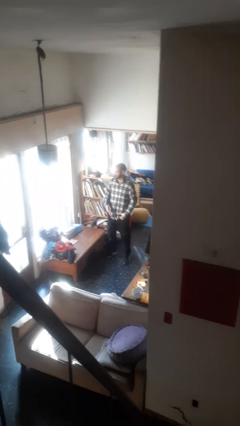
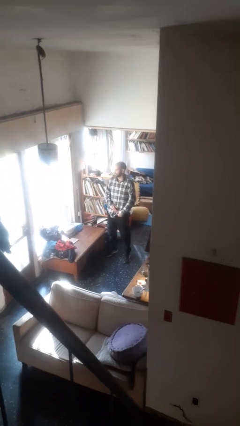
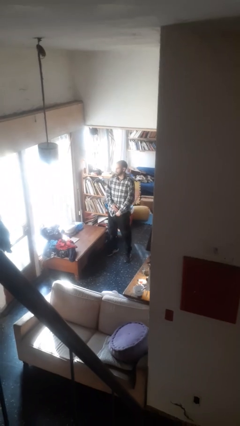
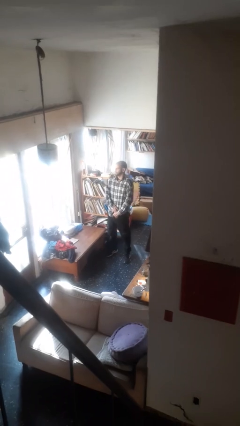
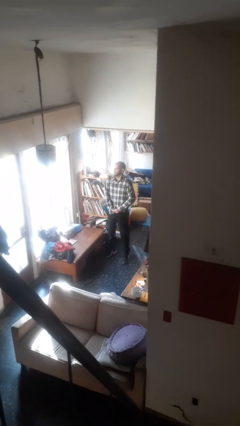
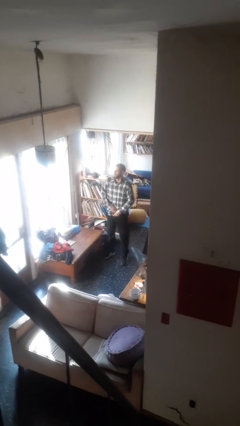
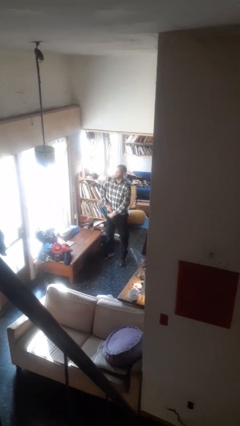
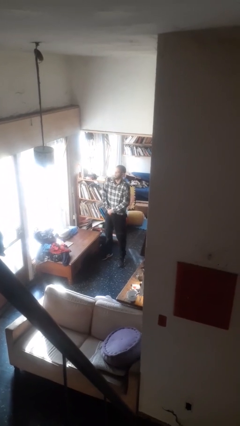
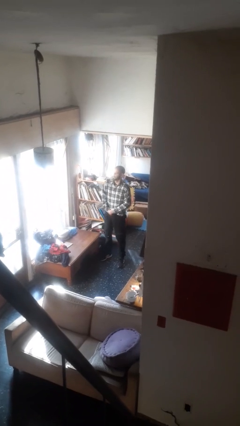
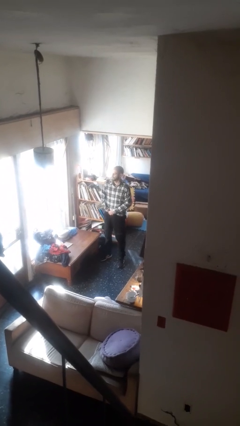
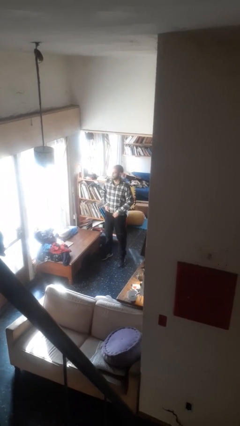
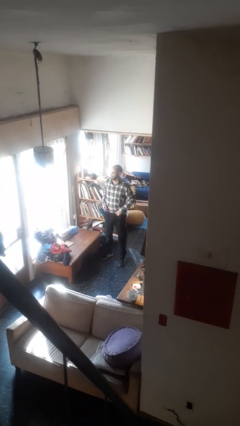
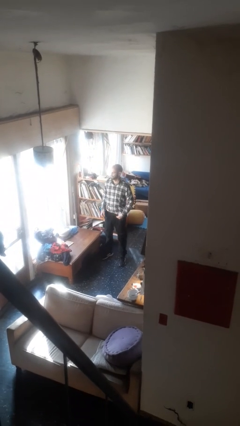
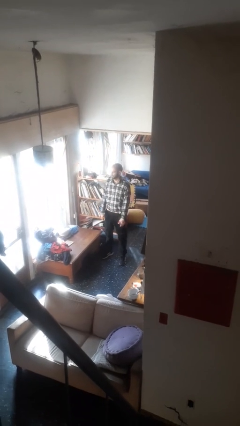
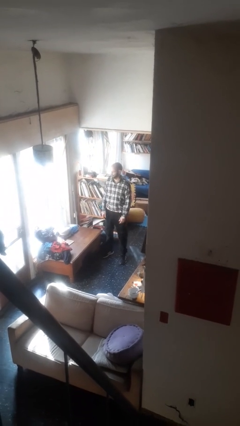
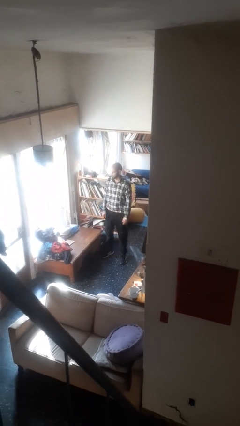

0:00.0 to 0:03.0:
person tucks in shirt

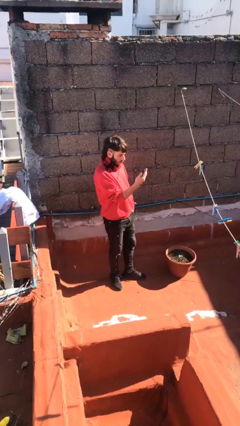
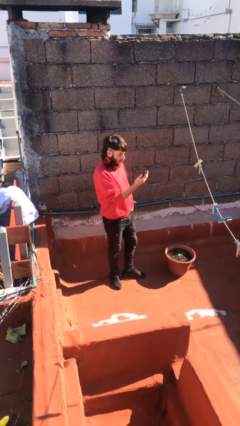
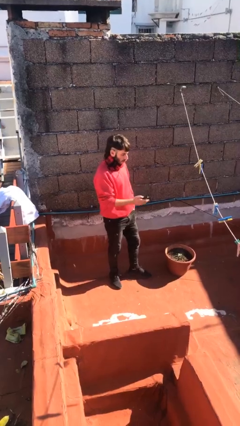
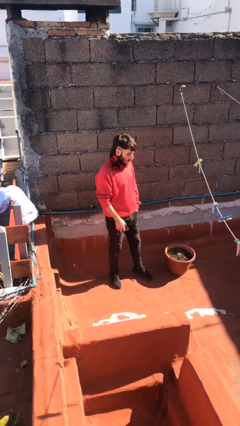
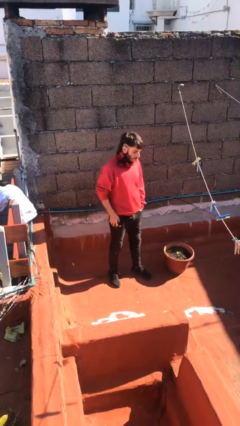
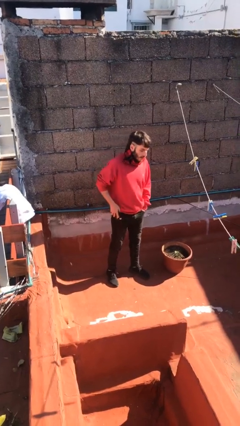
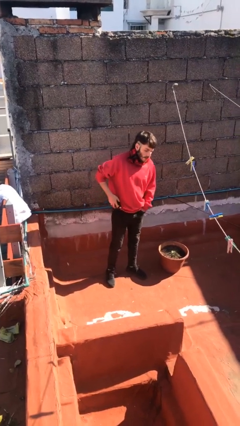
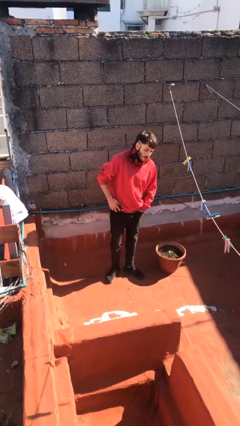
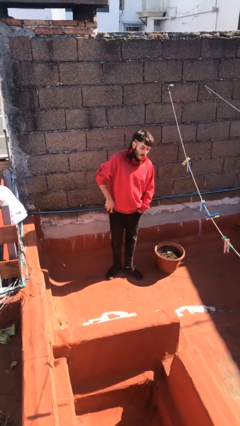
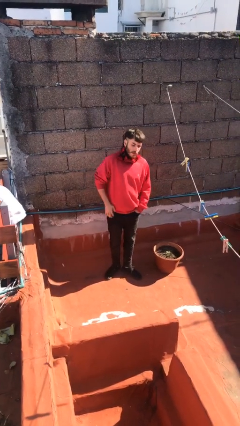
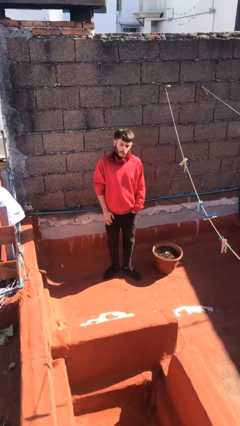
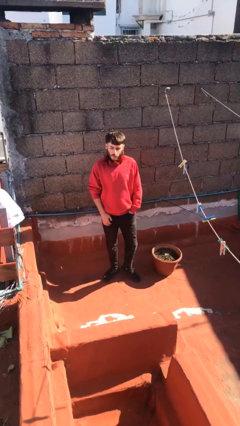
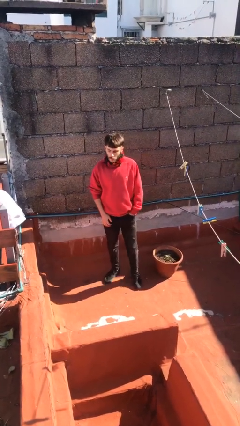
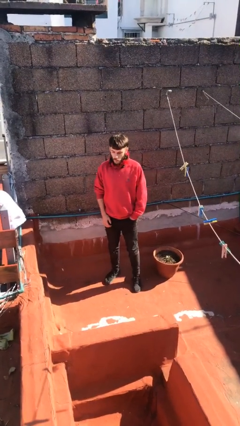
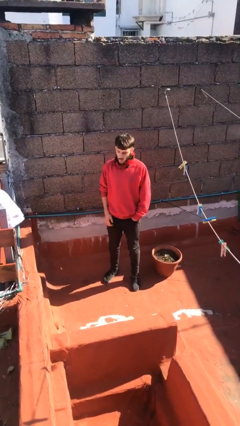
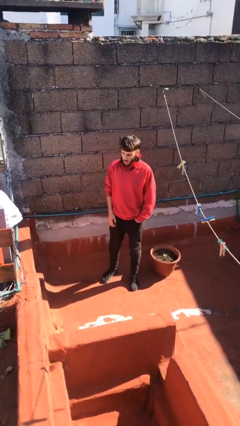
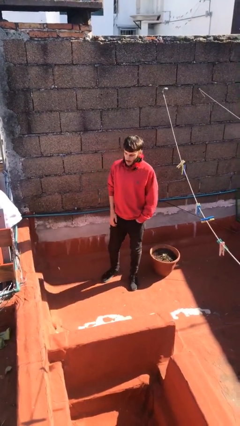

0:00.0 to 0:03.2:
person puts phone into pocket

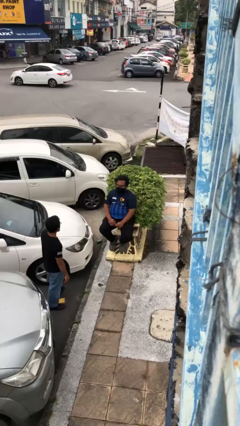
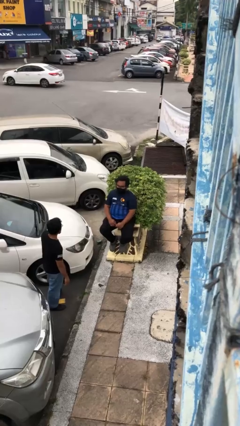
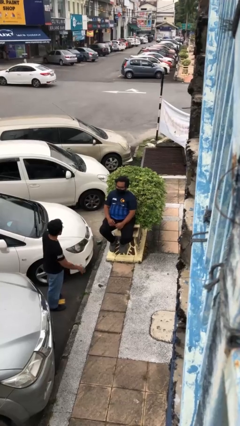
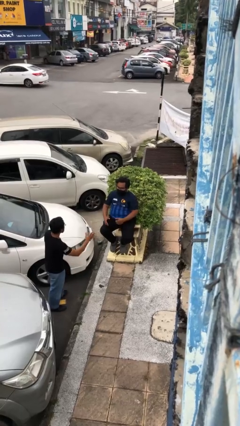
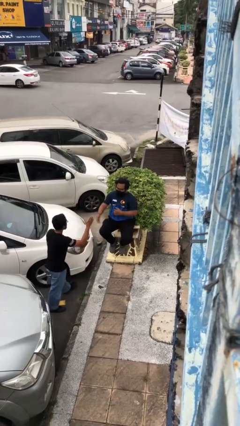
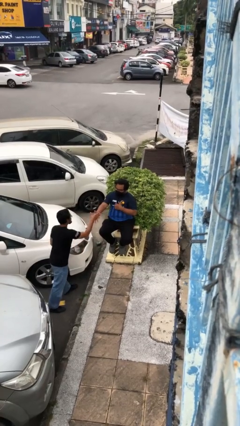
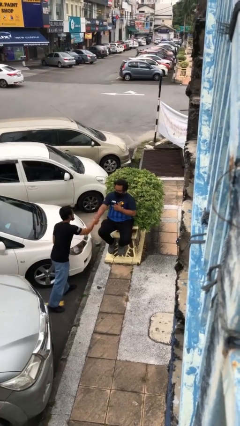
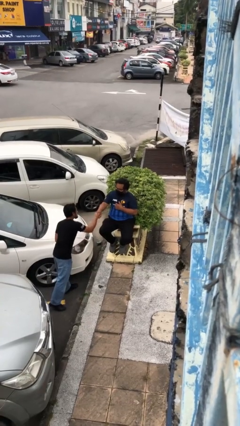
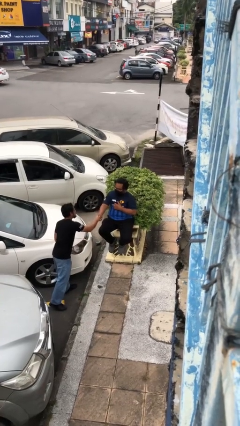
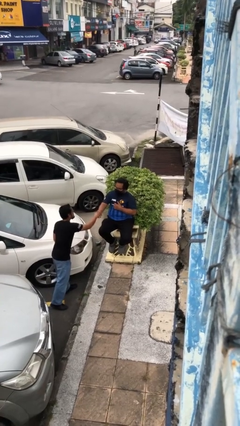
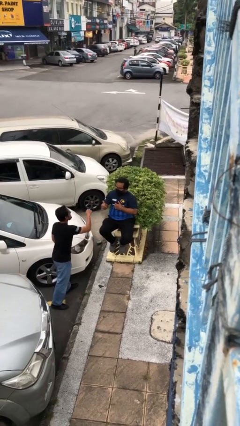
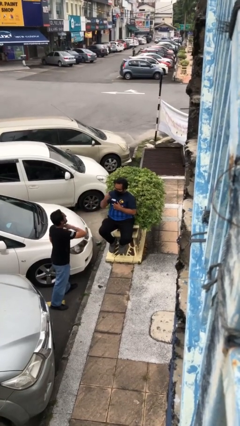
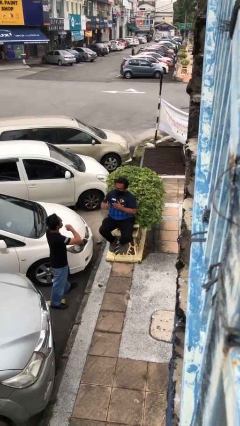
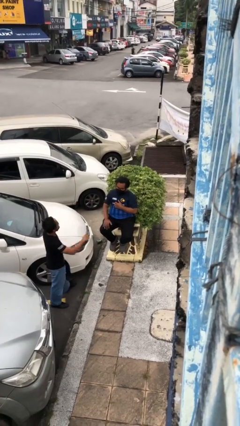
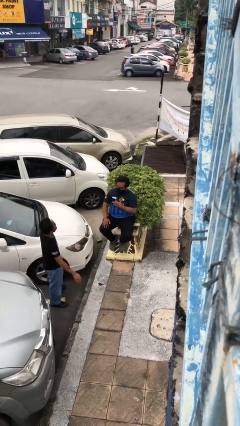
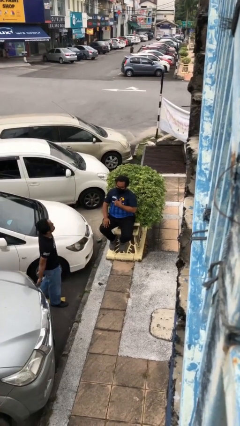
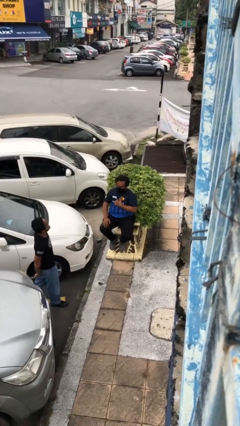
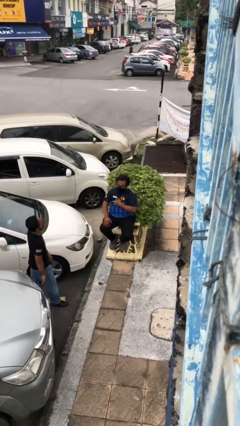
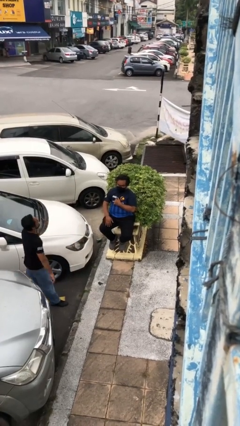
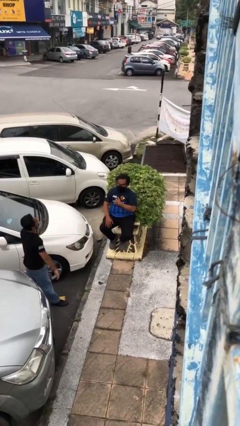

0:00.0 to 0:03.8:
person shakes hand

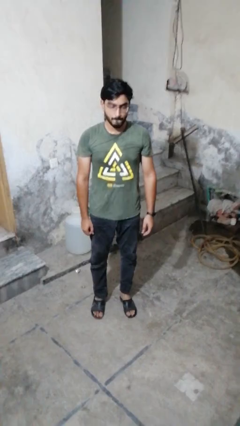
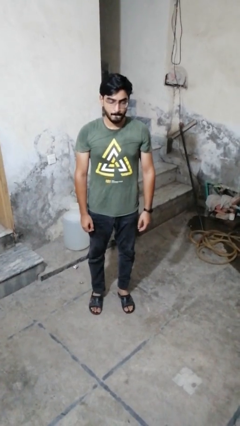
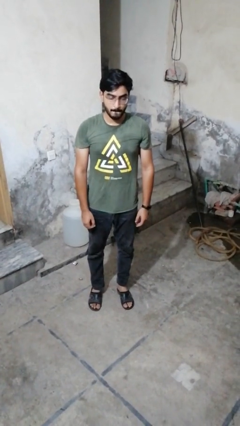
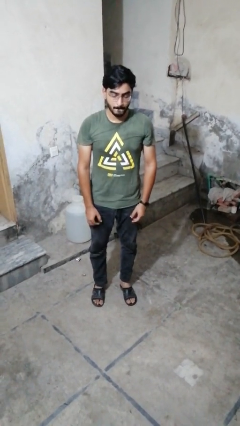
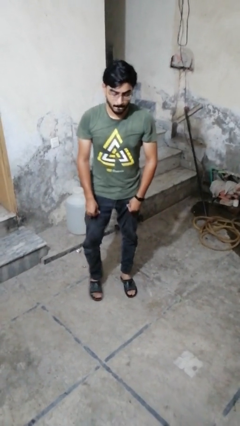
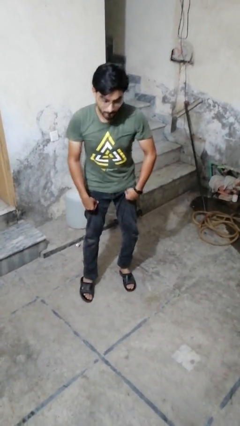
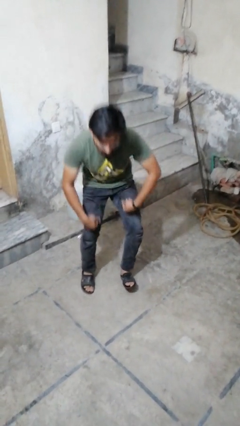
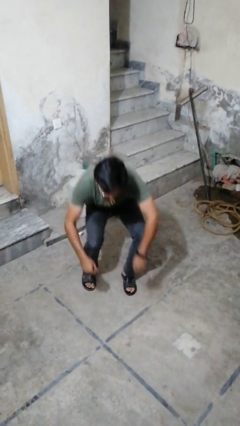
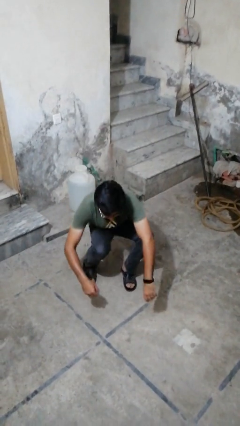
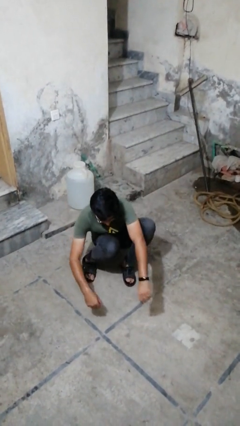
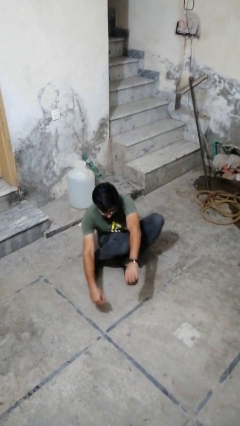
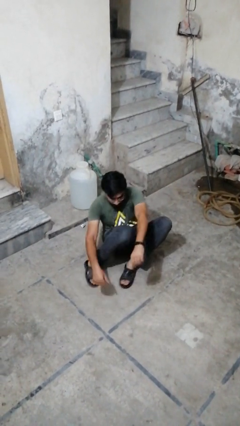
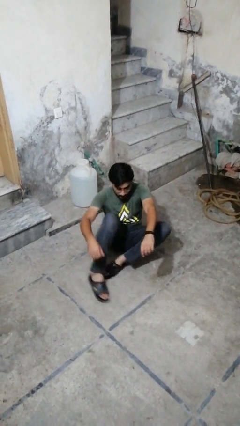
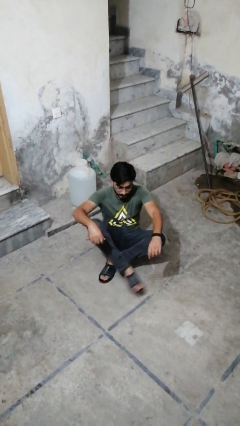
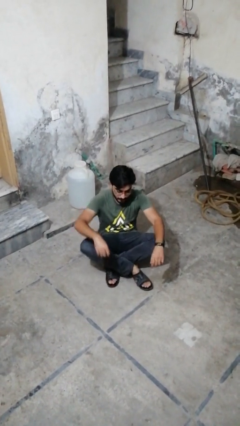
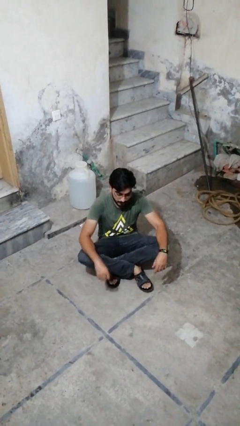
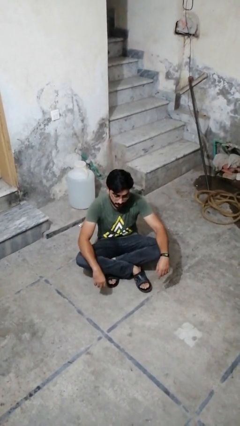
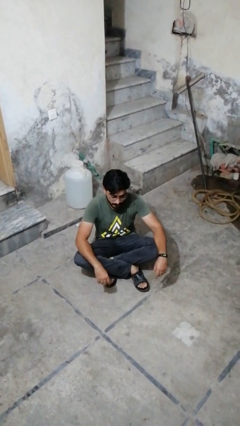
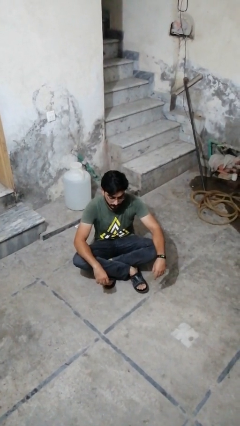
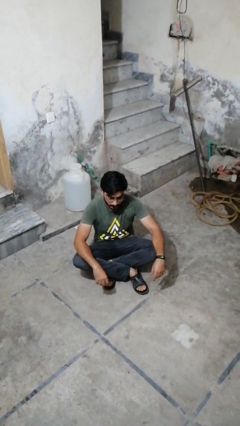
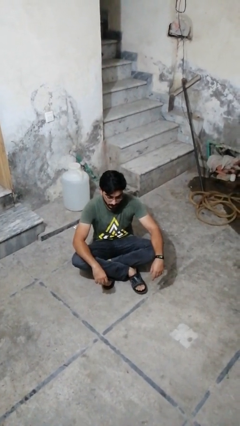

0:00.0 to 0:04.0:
person sits crisscross

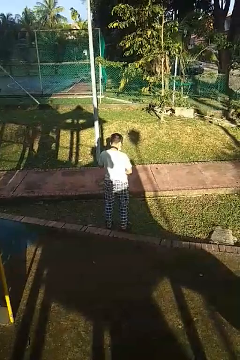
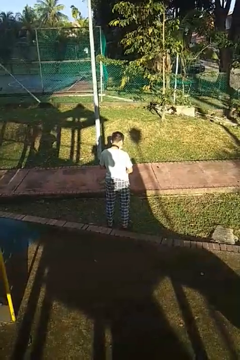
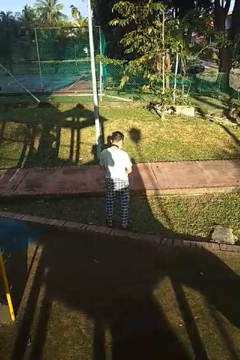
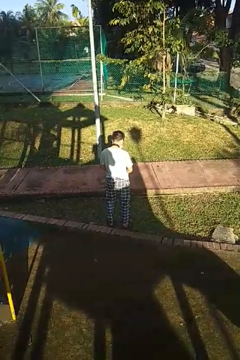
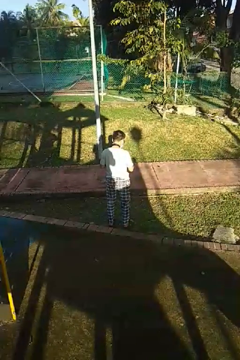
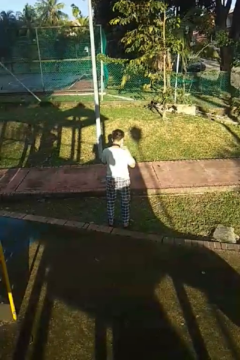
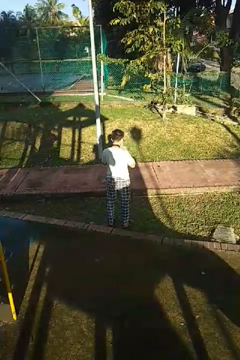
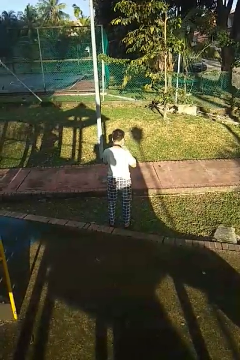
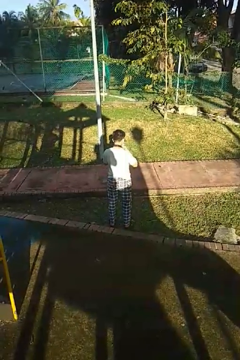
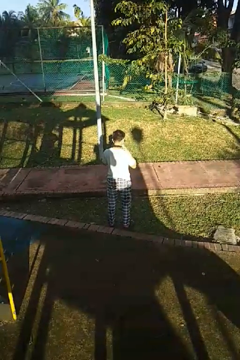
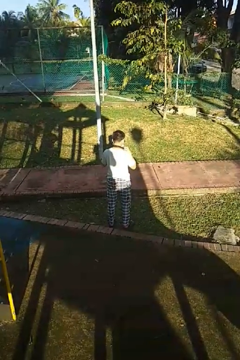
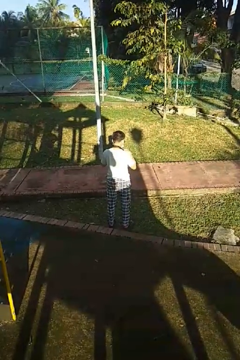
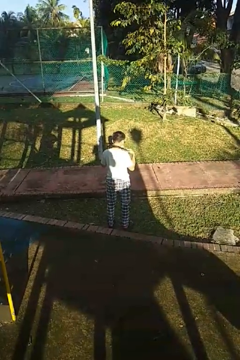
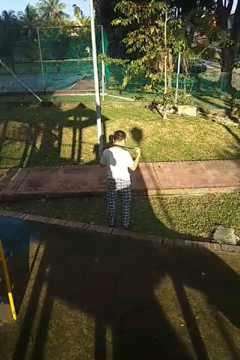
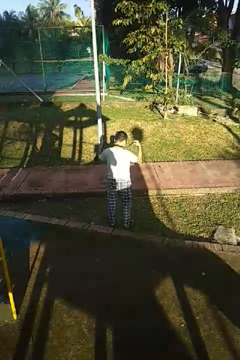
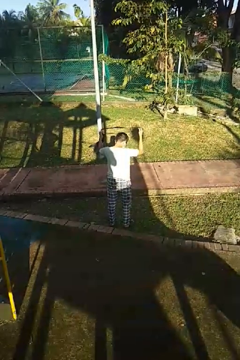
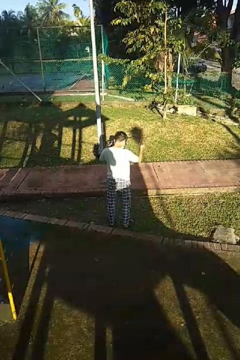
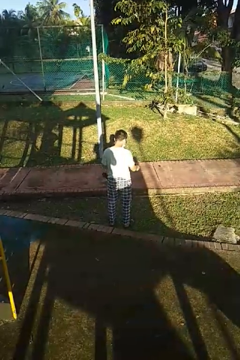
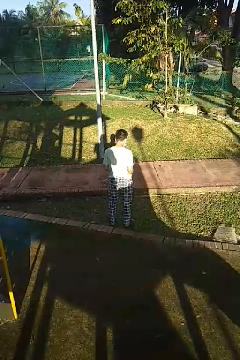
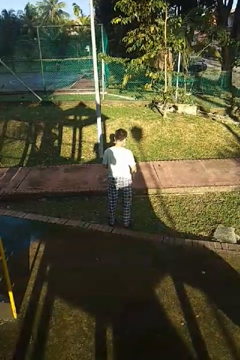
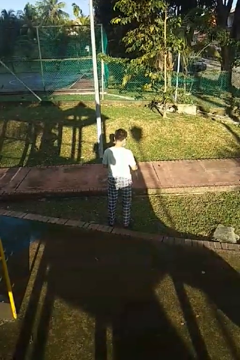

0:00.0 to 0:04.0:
person takes off necktie

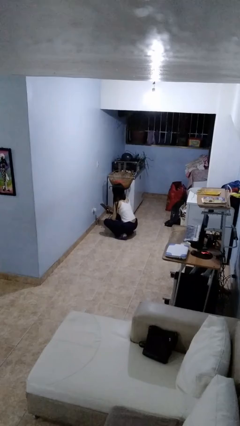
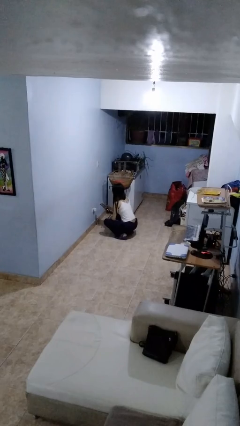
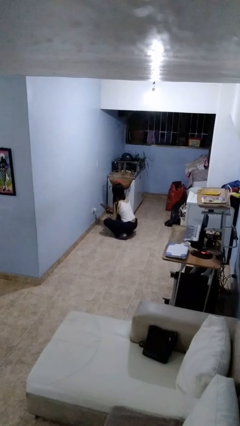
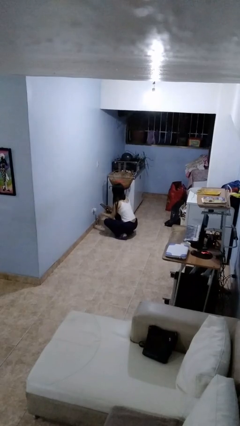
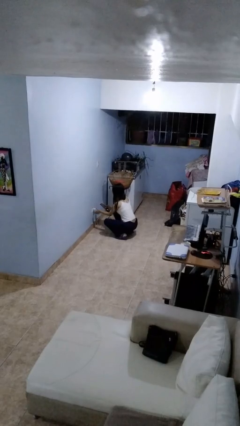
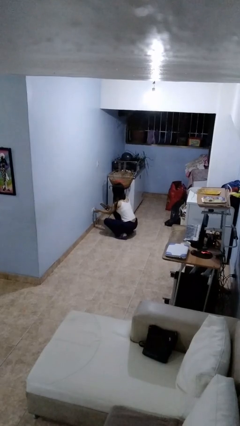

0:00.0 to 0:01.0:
person unplugs from electrical socket
